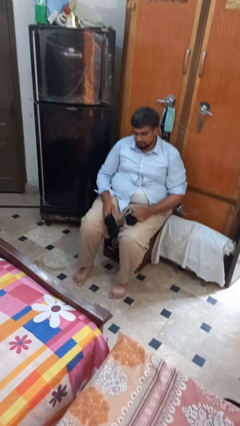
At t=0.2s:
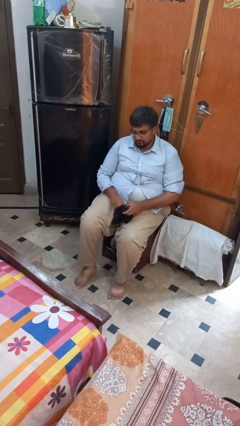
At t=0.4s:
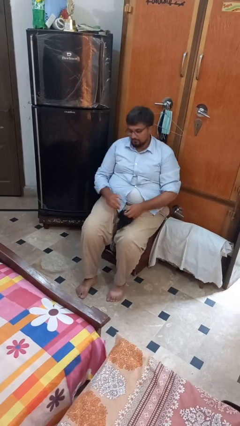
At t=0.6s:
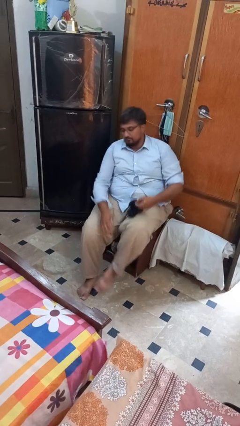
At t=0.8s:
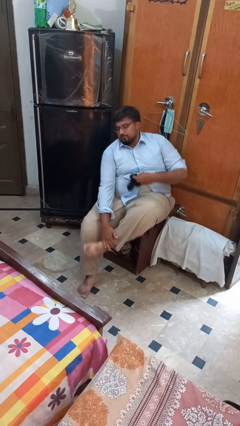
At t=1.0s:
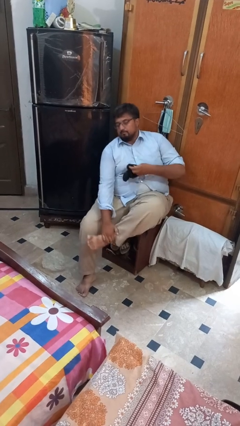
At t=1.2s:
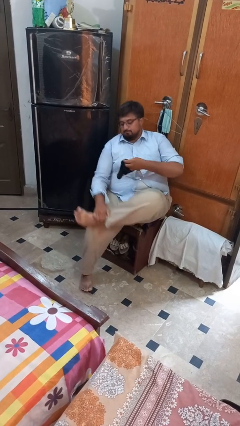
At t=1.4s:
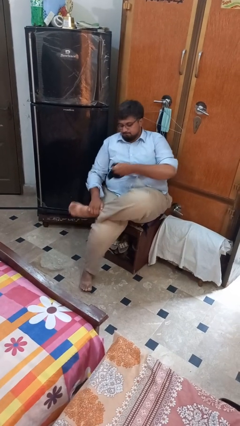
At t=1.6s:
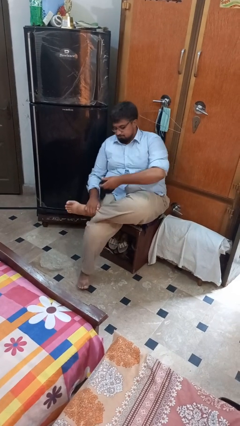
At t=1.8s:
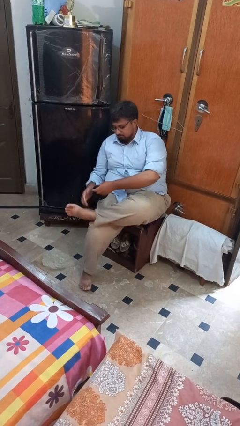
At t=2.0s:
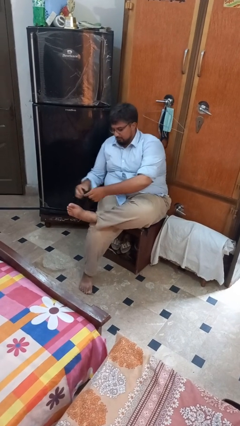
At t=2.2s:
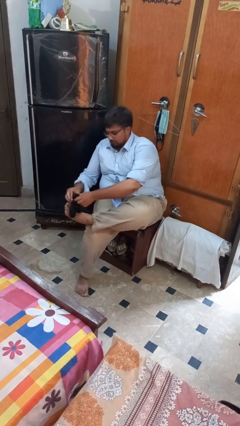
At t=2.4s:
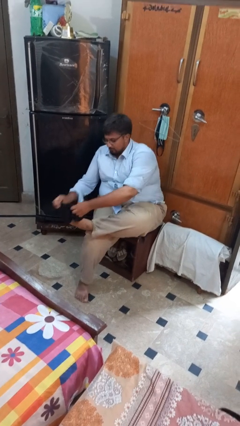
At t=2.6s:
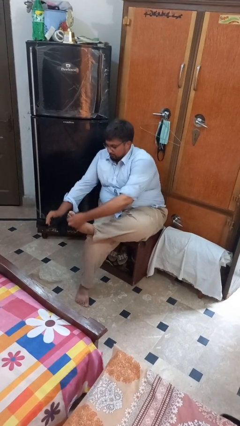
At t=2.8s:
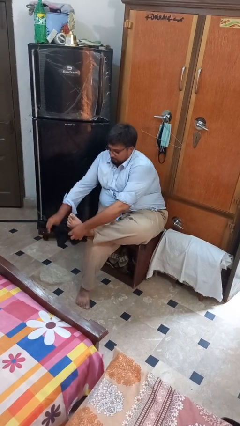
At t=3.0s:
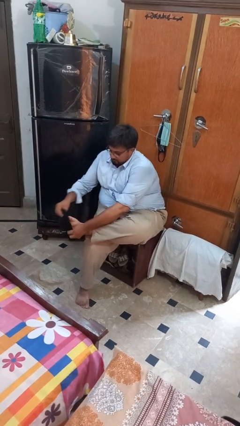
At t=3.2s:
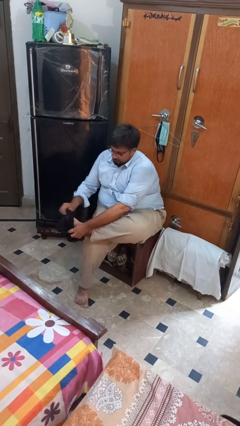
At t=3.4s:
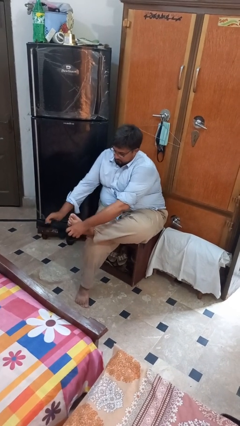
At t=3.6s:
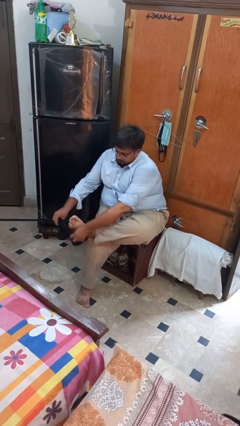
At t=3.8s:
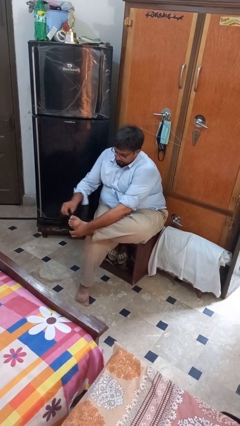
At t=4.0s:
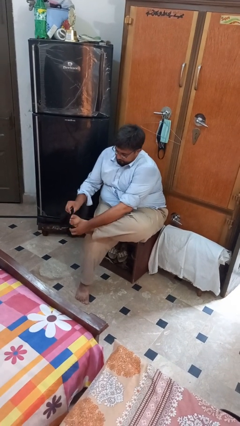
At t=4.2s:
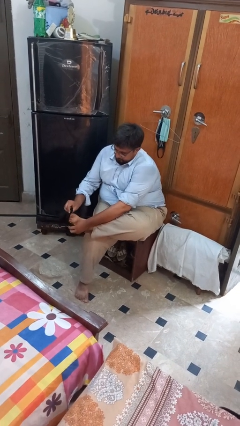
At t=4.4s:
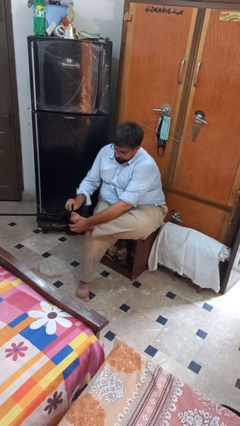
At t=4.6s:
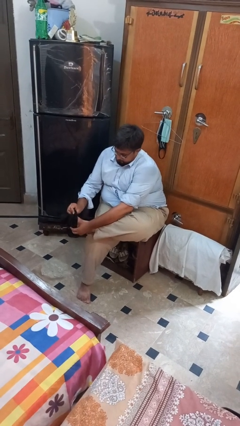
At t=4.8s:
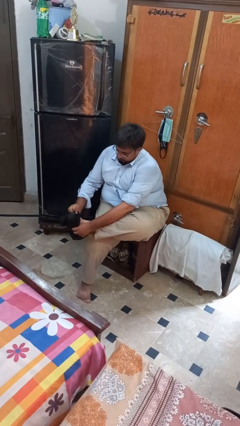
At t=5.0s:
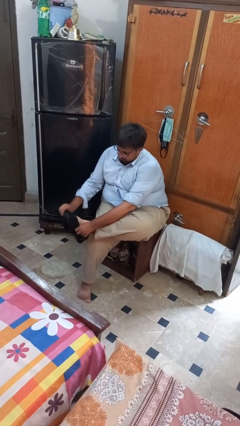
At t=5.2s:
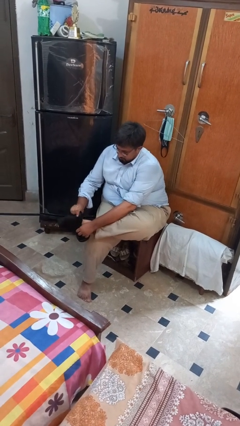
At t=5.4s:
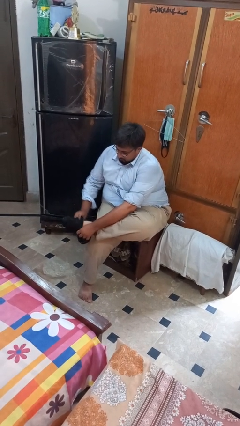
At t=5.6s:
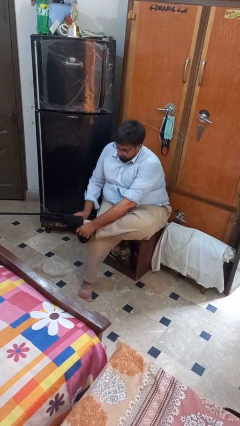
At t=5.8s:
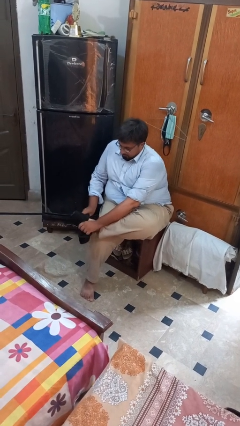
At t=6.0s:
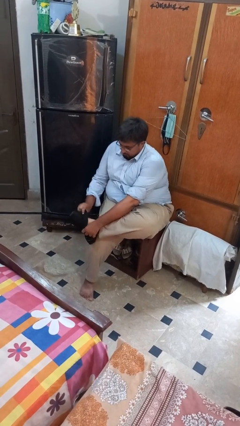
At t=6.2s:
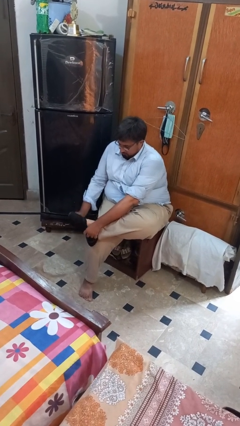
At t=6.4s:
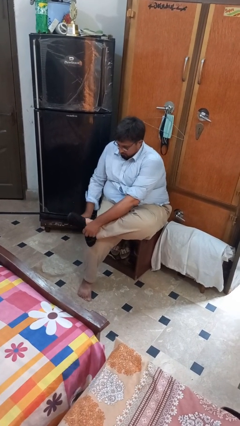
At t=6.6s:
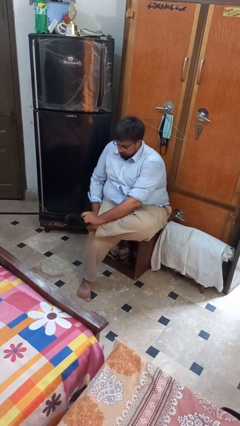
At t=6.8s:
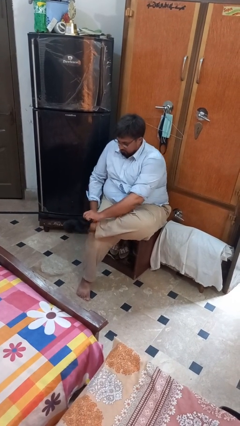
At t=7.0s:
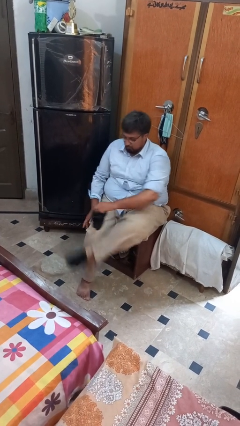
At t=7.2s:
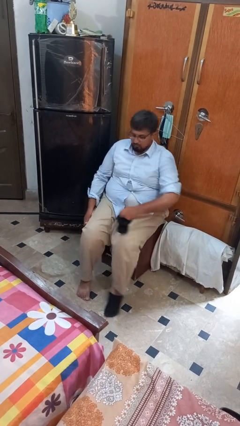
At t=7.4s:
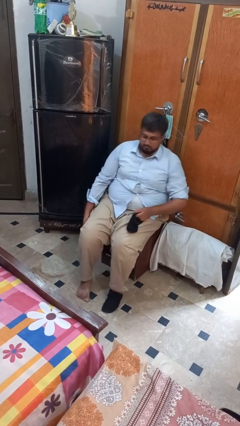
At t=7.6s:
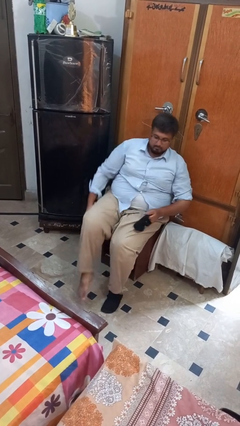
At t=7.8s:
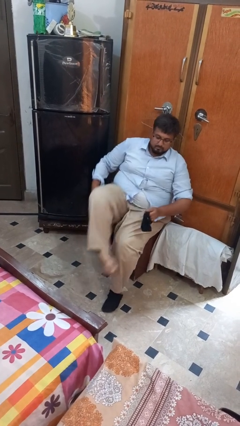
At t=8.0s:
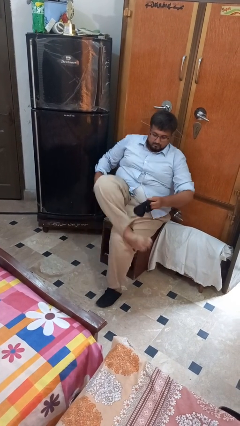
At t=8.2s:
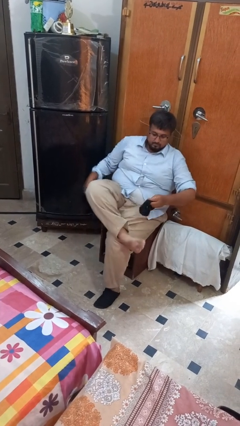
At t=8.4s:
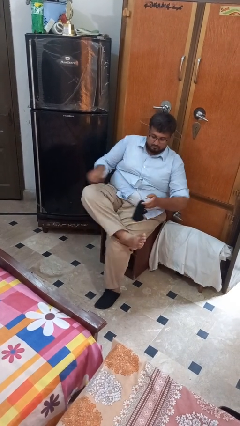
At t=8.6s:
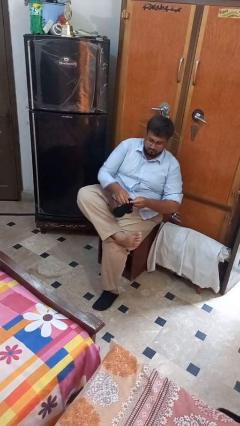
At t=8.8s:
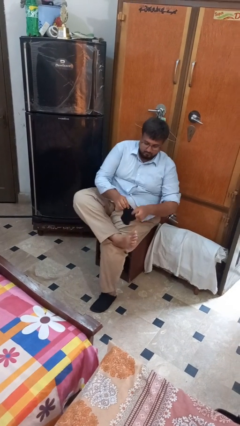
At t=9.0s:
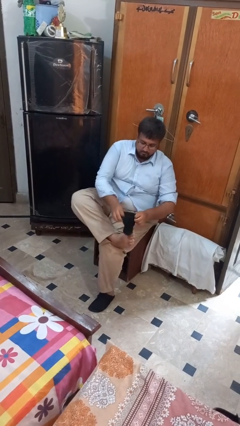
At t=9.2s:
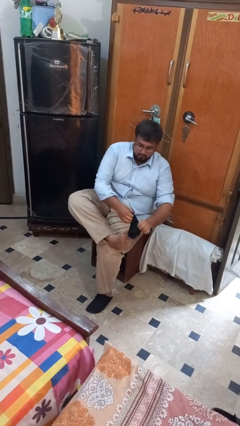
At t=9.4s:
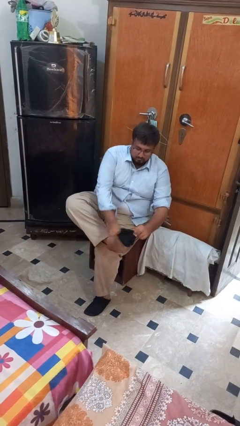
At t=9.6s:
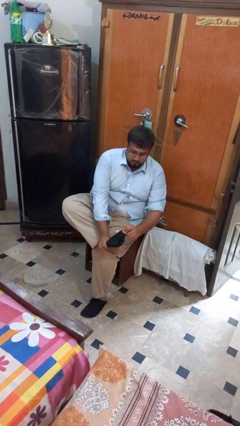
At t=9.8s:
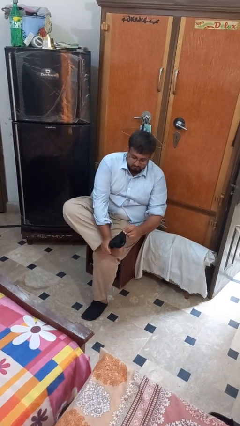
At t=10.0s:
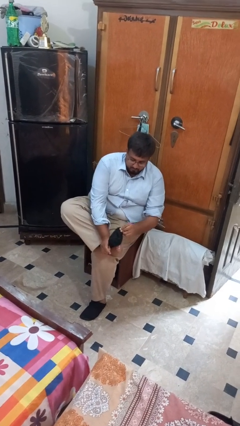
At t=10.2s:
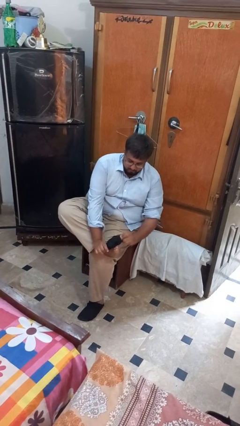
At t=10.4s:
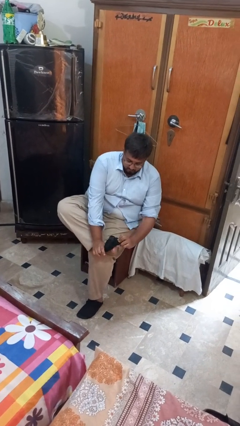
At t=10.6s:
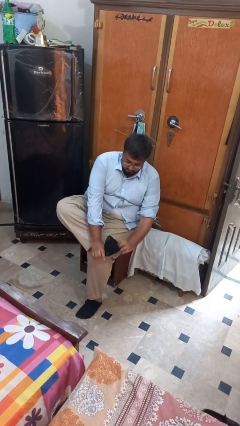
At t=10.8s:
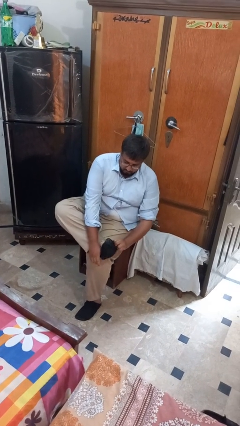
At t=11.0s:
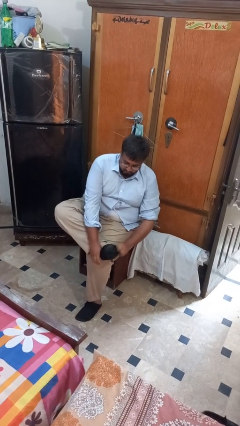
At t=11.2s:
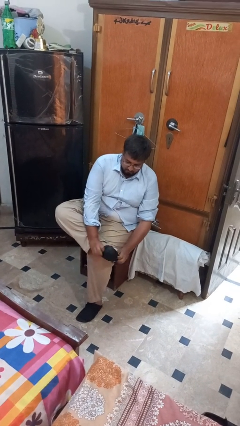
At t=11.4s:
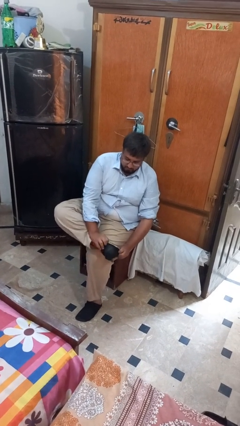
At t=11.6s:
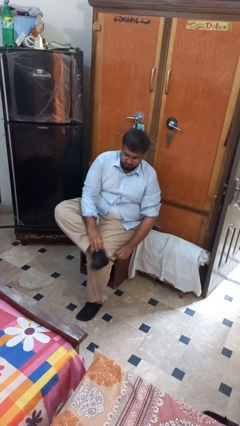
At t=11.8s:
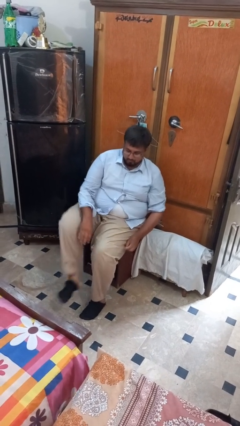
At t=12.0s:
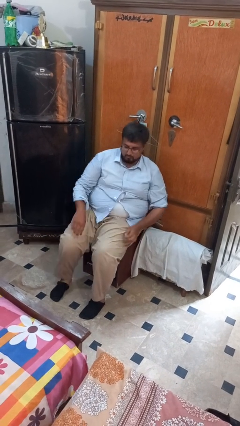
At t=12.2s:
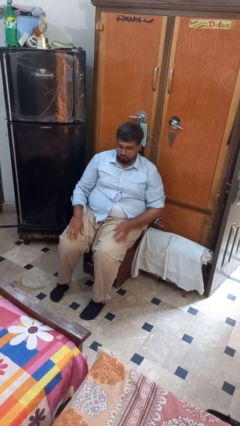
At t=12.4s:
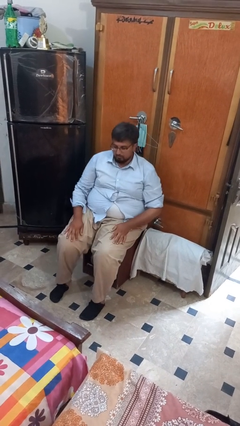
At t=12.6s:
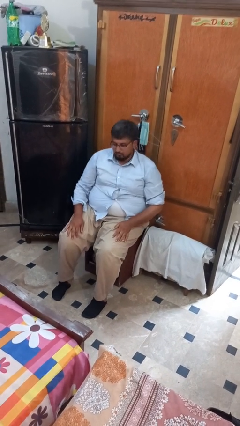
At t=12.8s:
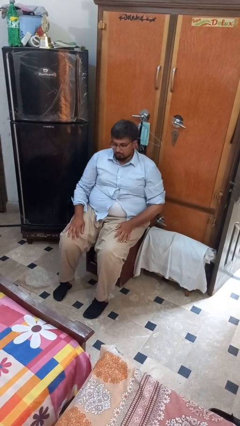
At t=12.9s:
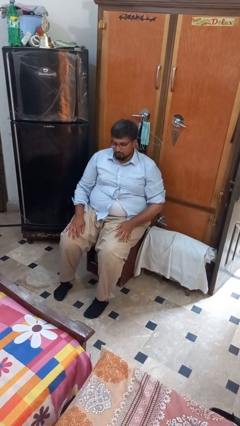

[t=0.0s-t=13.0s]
person puts on socks

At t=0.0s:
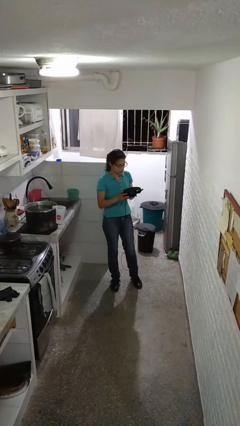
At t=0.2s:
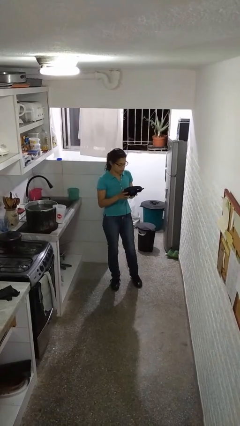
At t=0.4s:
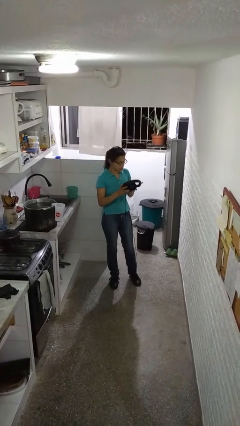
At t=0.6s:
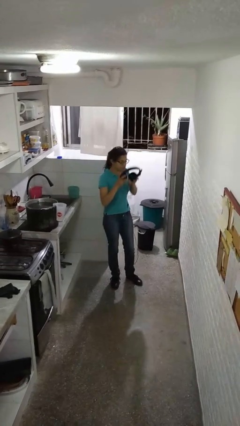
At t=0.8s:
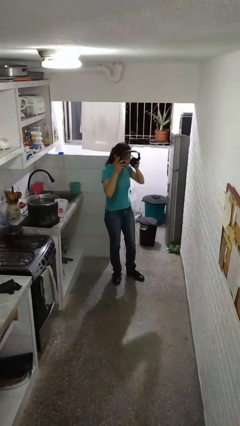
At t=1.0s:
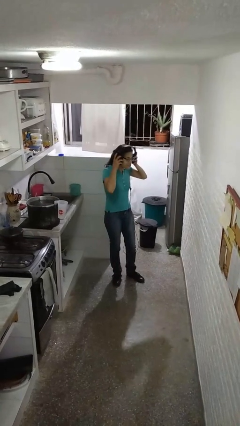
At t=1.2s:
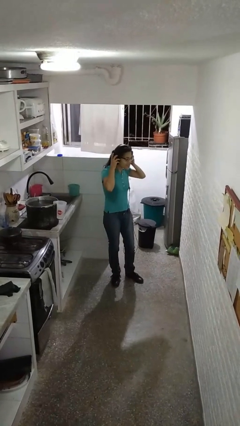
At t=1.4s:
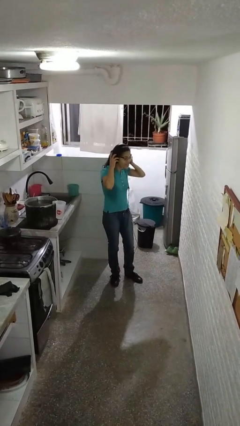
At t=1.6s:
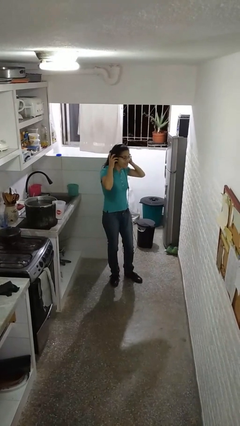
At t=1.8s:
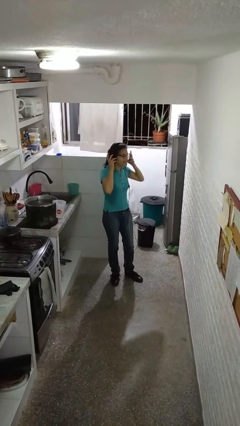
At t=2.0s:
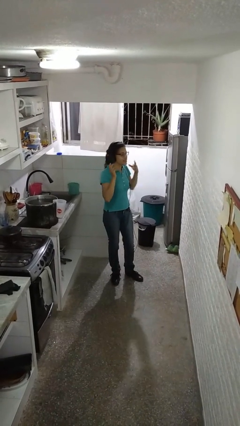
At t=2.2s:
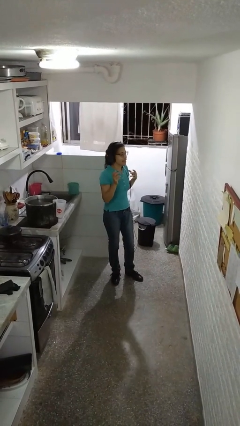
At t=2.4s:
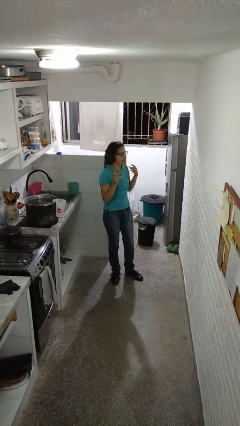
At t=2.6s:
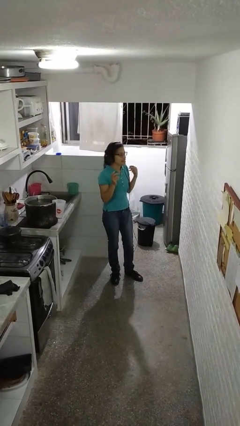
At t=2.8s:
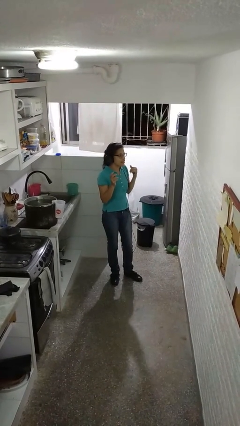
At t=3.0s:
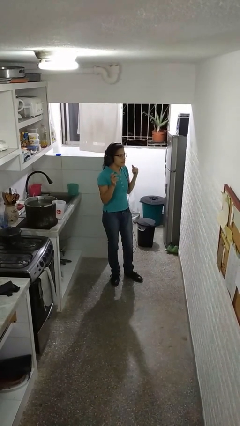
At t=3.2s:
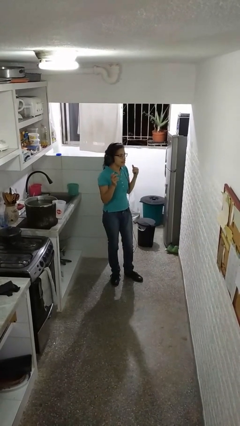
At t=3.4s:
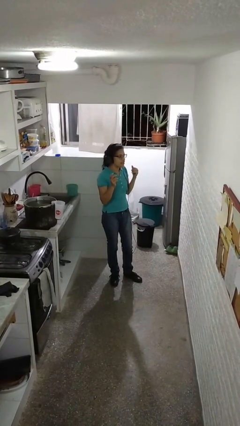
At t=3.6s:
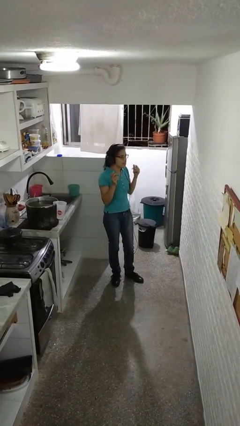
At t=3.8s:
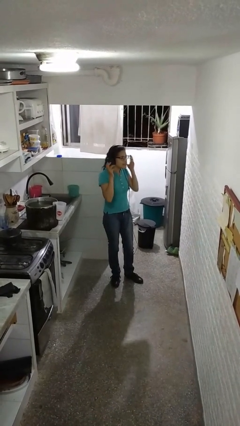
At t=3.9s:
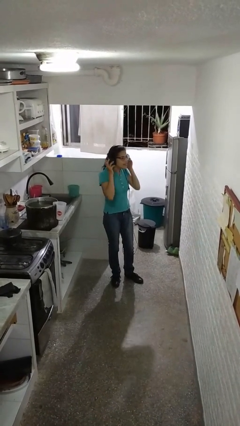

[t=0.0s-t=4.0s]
person puts on headphones

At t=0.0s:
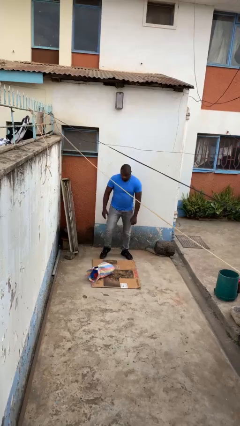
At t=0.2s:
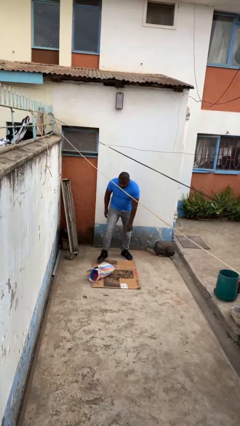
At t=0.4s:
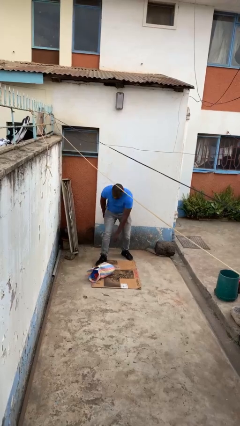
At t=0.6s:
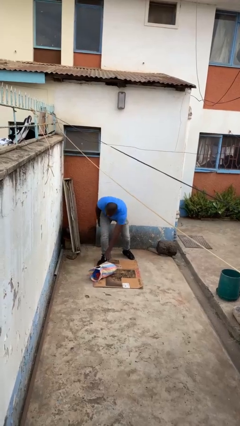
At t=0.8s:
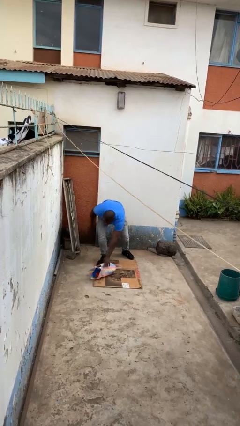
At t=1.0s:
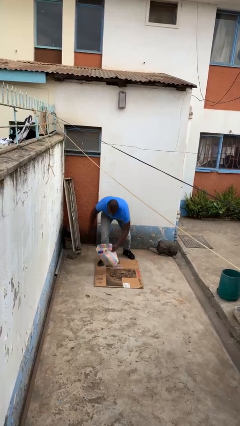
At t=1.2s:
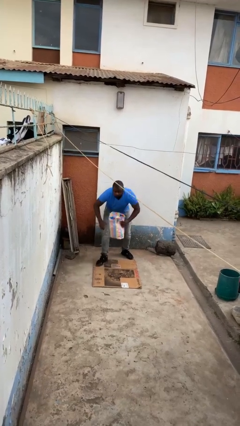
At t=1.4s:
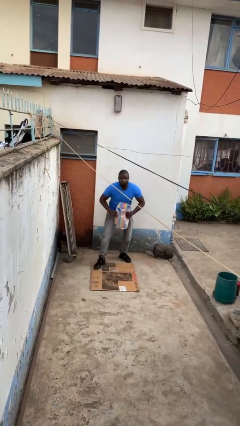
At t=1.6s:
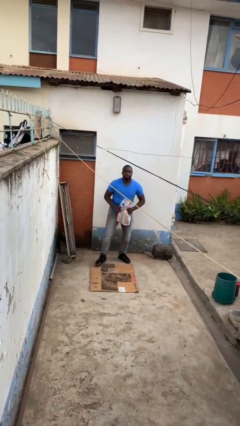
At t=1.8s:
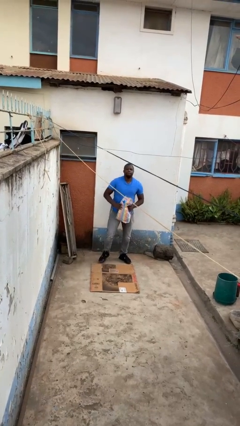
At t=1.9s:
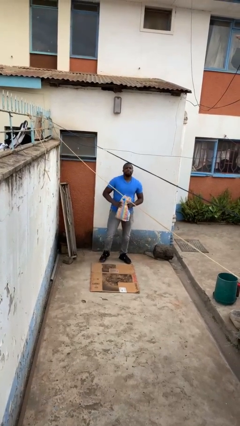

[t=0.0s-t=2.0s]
person picks up object from floor
